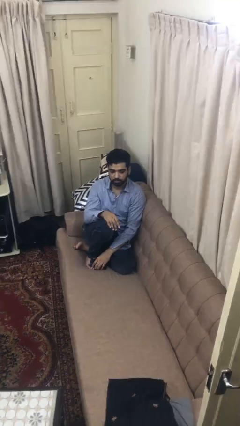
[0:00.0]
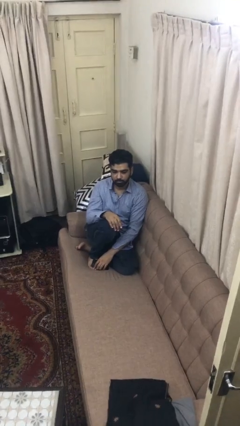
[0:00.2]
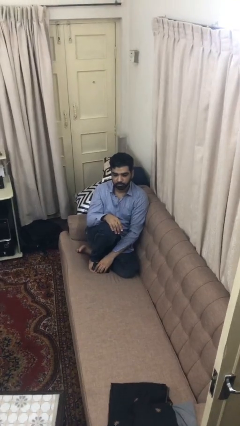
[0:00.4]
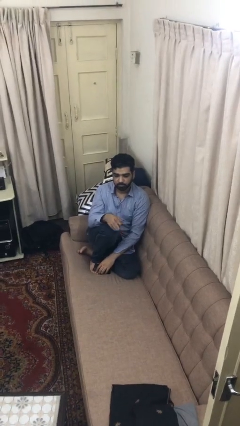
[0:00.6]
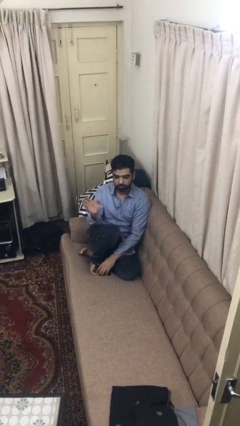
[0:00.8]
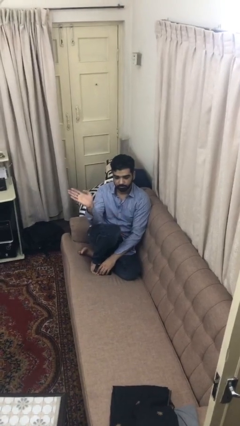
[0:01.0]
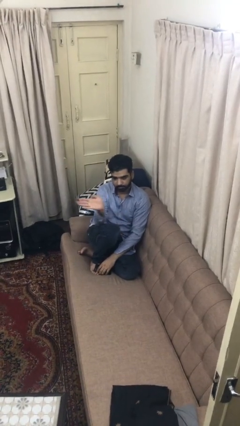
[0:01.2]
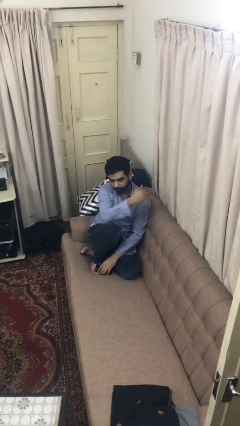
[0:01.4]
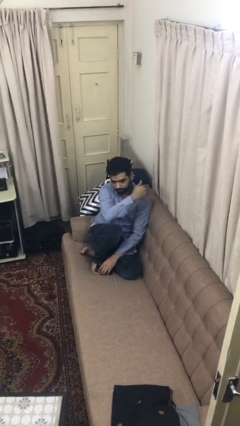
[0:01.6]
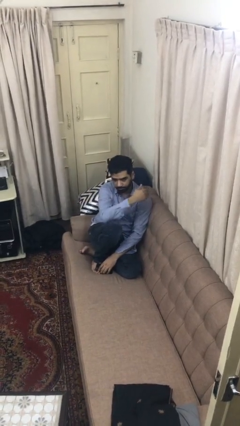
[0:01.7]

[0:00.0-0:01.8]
person gestures swipe left

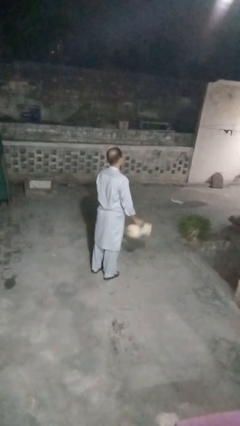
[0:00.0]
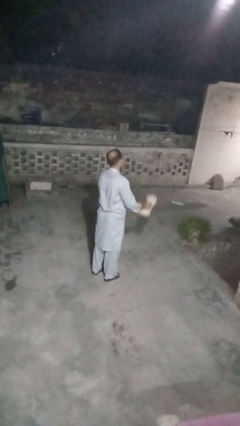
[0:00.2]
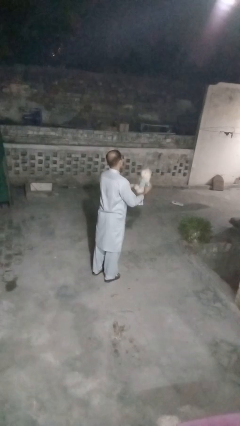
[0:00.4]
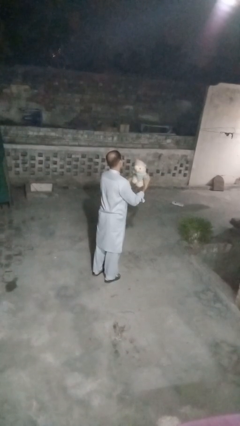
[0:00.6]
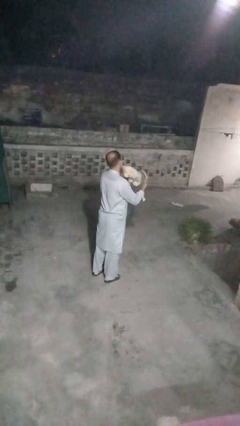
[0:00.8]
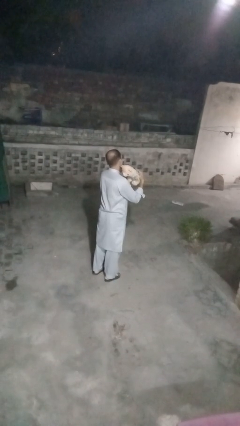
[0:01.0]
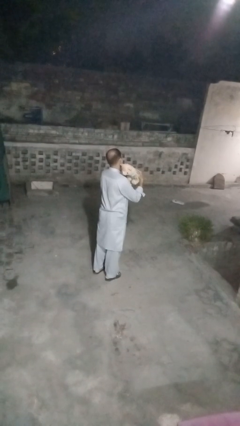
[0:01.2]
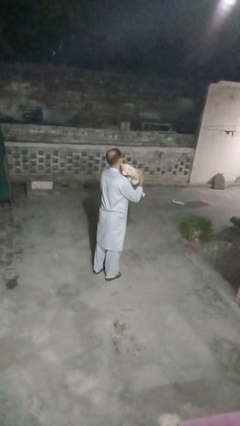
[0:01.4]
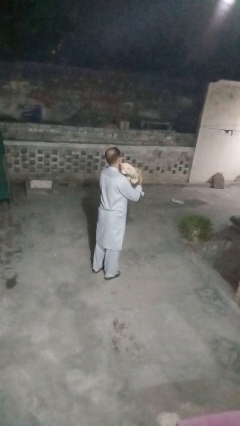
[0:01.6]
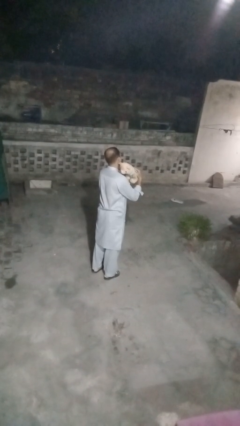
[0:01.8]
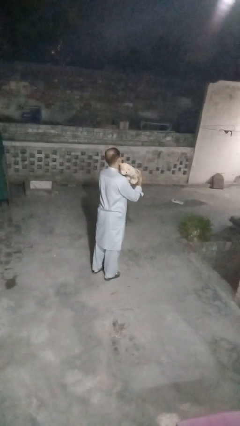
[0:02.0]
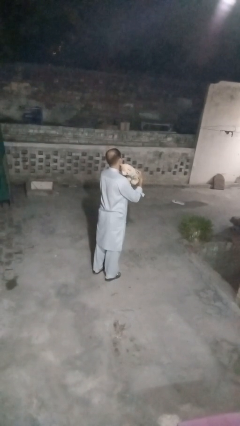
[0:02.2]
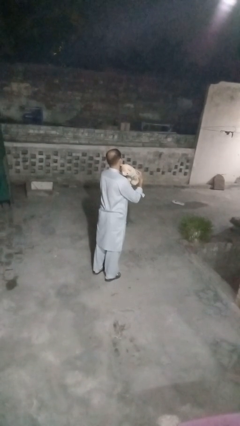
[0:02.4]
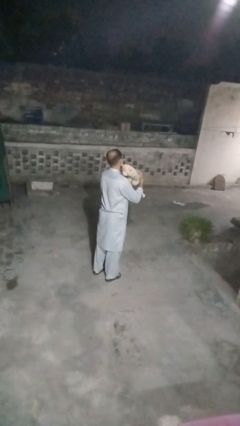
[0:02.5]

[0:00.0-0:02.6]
person hugs stuffed animal

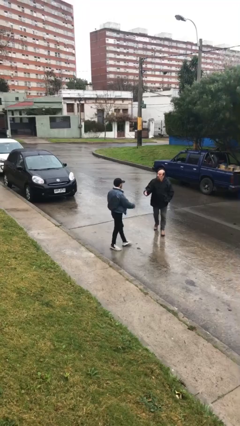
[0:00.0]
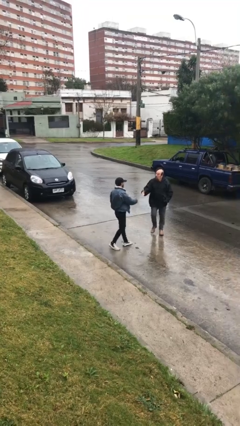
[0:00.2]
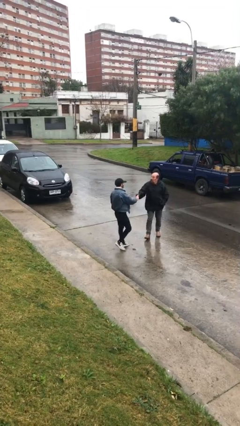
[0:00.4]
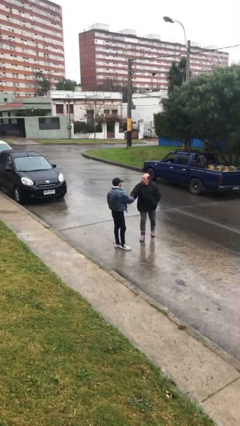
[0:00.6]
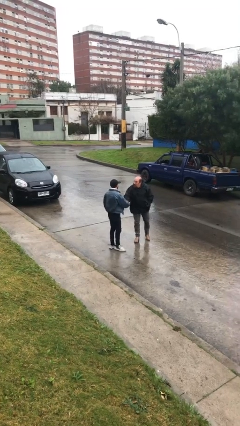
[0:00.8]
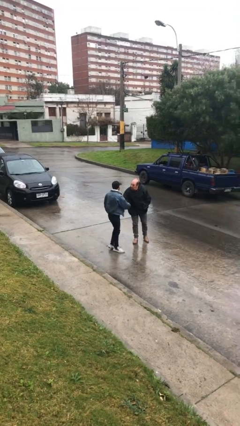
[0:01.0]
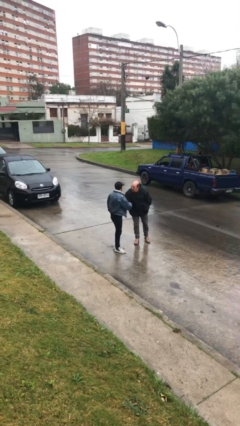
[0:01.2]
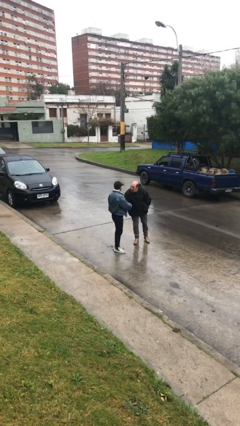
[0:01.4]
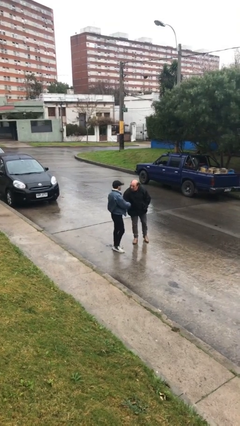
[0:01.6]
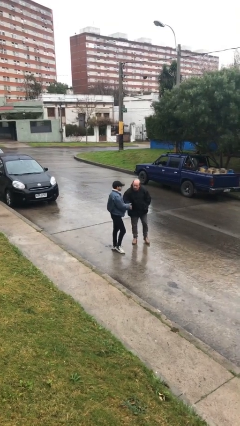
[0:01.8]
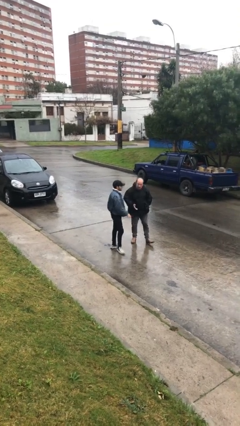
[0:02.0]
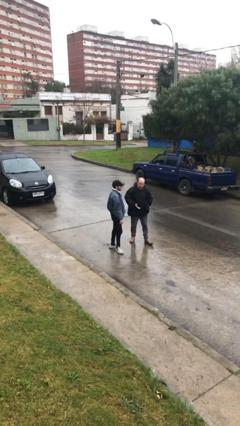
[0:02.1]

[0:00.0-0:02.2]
person shakes hand

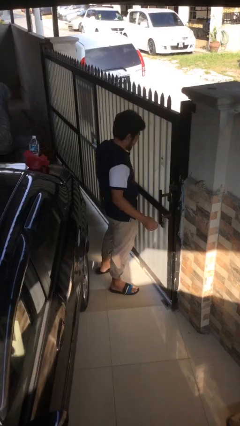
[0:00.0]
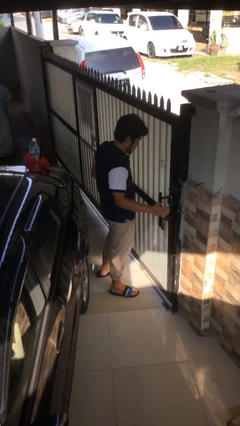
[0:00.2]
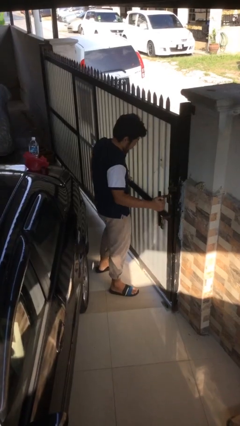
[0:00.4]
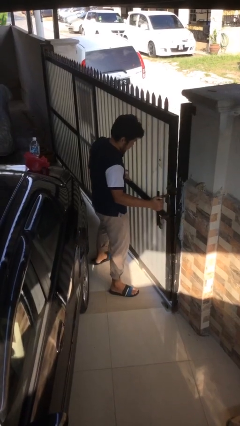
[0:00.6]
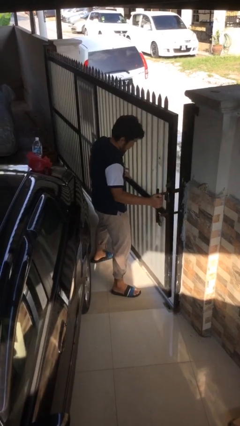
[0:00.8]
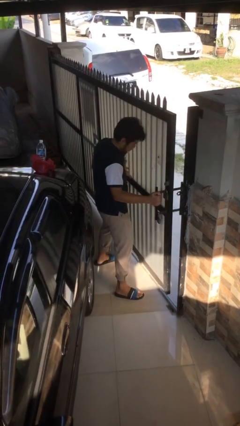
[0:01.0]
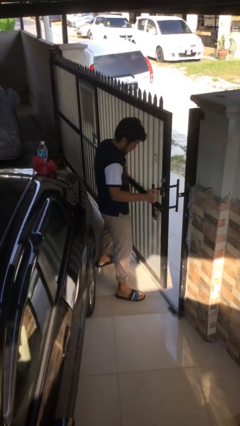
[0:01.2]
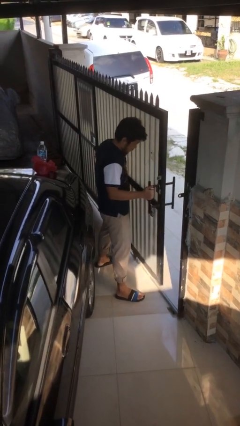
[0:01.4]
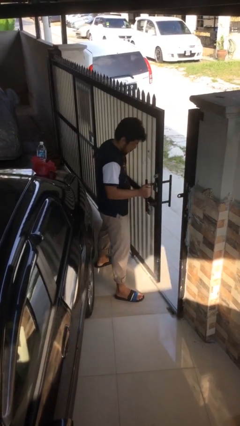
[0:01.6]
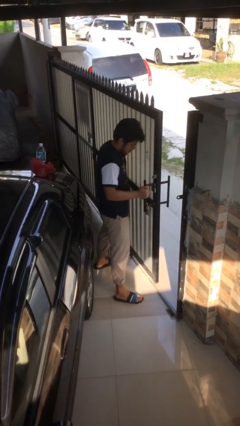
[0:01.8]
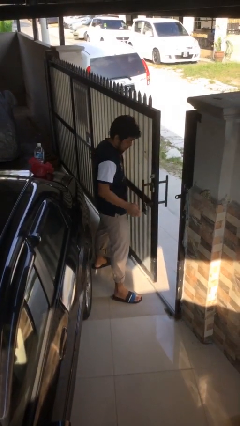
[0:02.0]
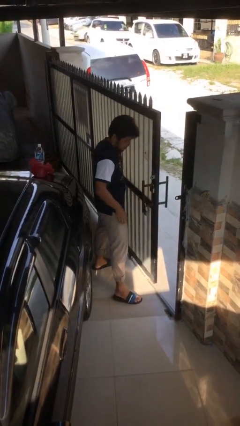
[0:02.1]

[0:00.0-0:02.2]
person opens sliding door

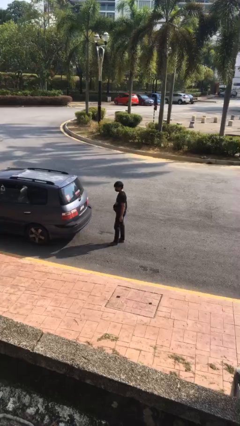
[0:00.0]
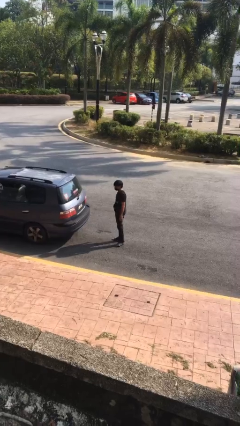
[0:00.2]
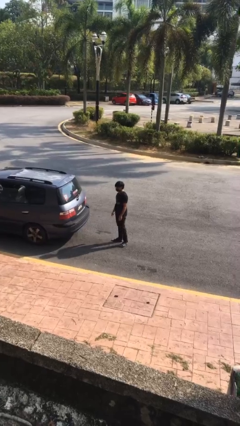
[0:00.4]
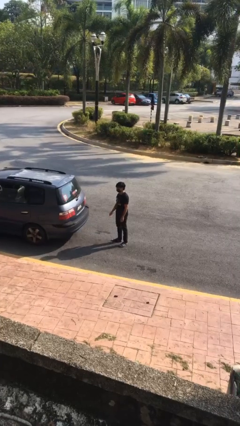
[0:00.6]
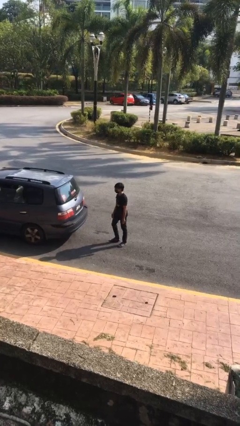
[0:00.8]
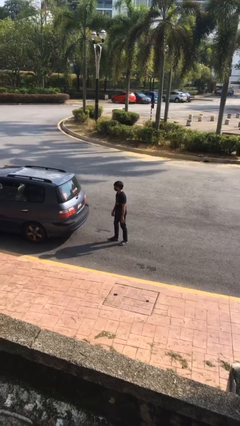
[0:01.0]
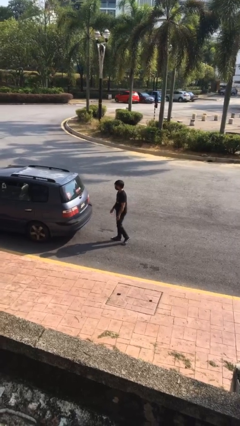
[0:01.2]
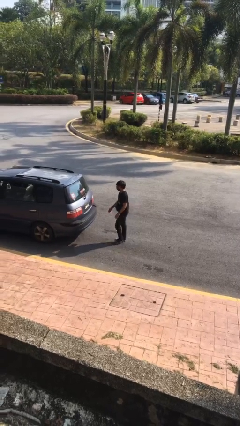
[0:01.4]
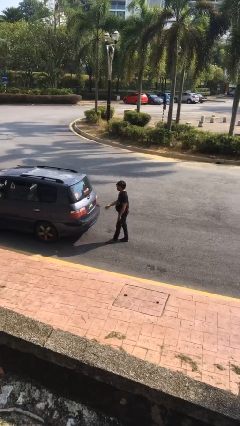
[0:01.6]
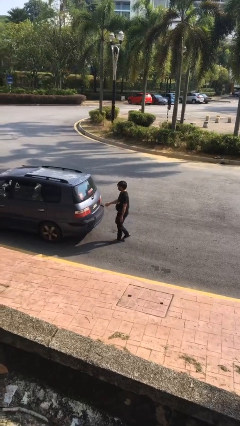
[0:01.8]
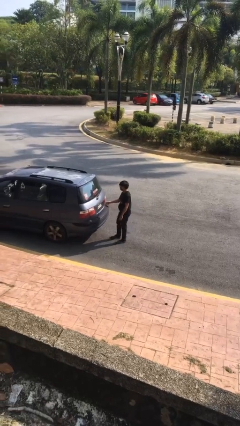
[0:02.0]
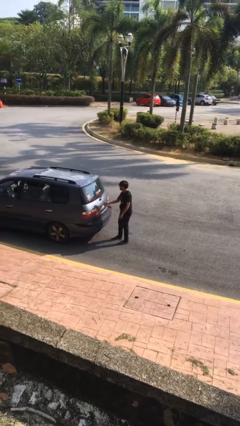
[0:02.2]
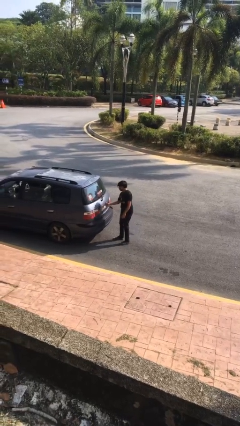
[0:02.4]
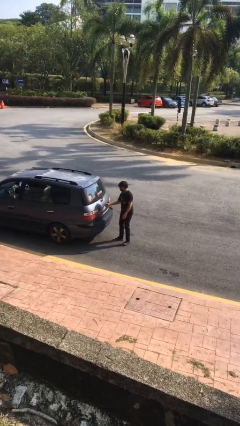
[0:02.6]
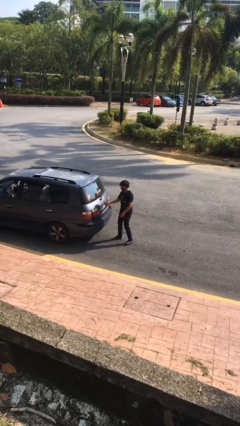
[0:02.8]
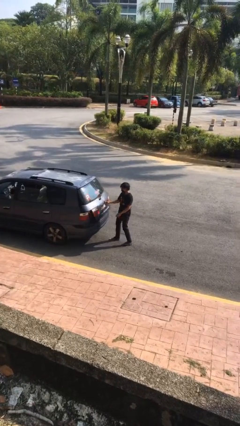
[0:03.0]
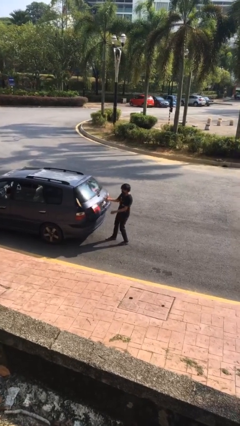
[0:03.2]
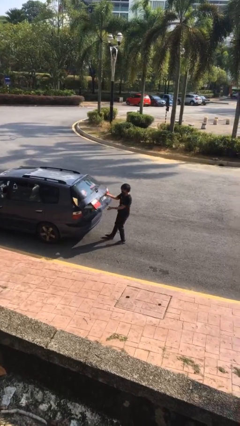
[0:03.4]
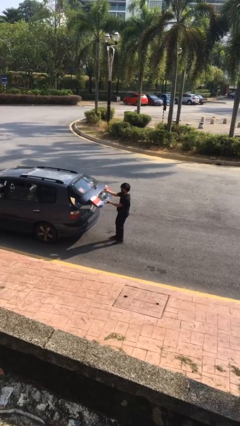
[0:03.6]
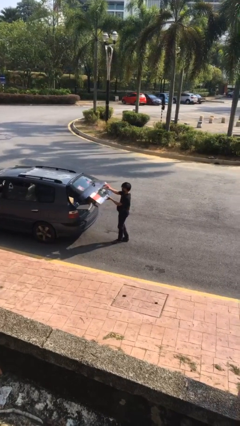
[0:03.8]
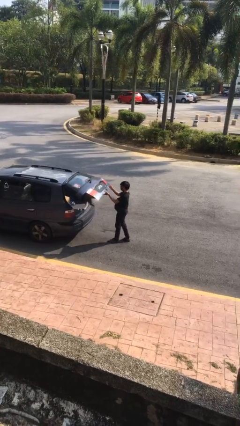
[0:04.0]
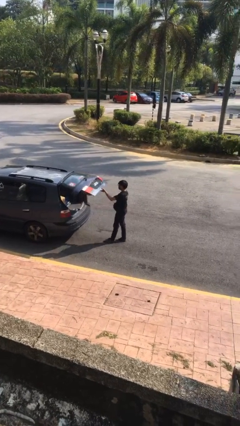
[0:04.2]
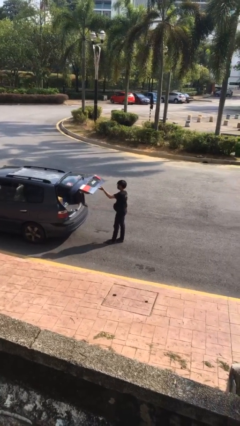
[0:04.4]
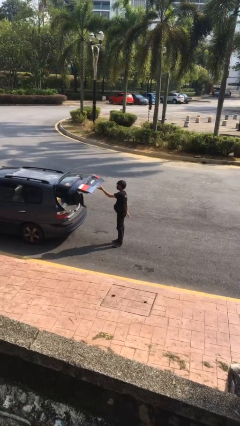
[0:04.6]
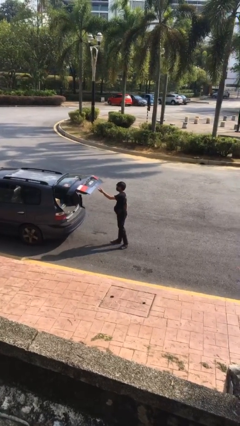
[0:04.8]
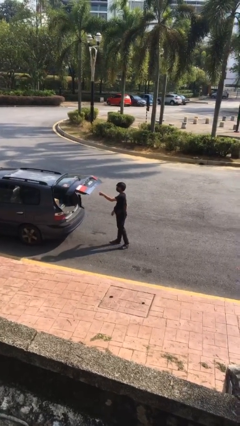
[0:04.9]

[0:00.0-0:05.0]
person opens car trunk

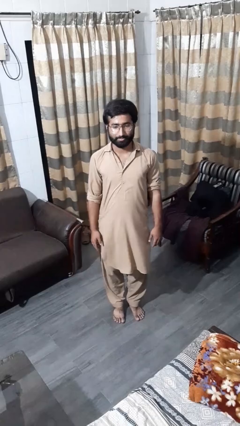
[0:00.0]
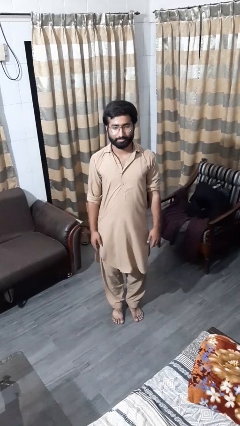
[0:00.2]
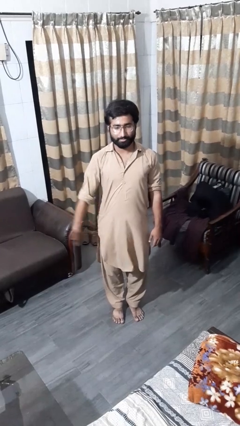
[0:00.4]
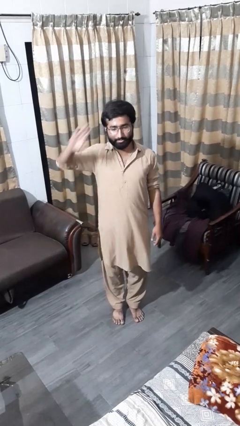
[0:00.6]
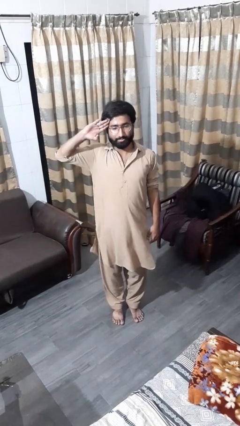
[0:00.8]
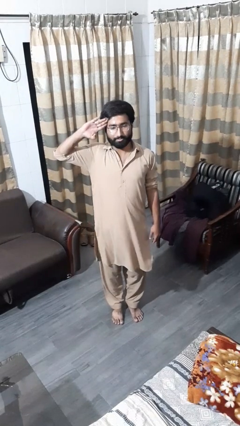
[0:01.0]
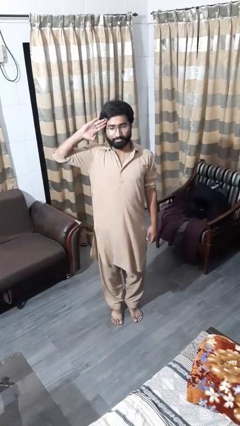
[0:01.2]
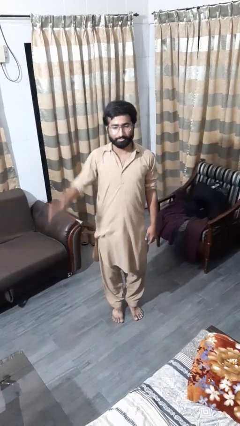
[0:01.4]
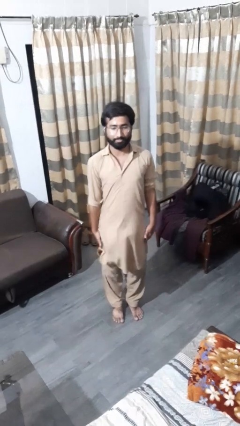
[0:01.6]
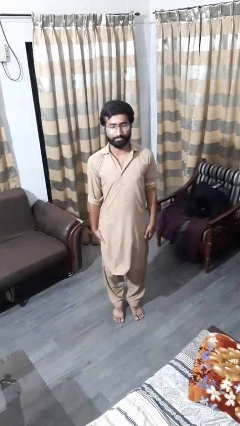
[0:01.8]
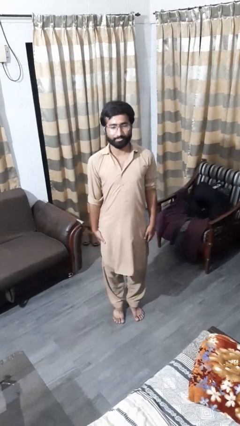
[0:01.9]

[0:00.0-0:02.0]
person salutes

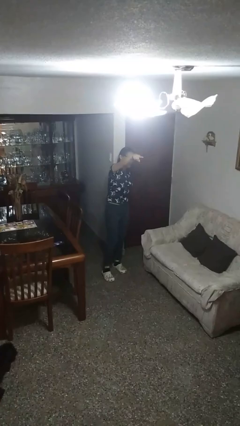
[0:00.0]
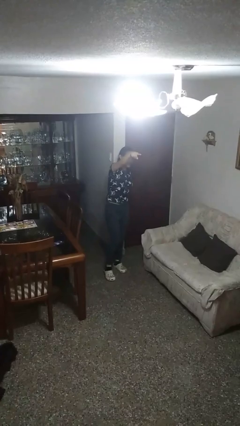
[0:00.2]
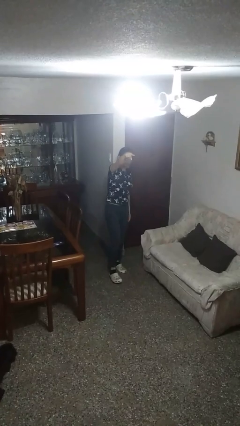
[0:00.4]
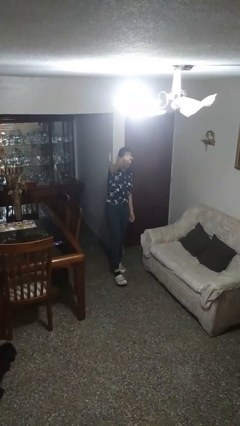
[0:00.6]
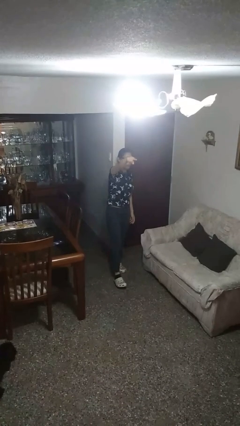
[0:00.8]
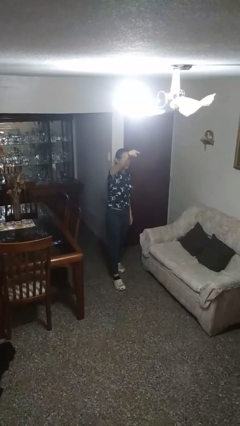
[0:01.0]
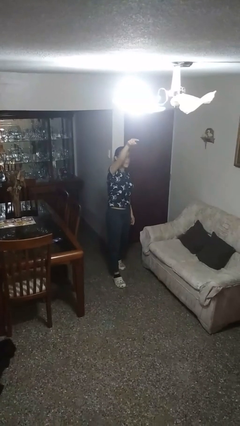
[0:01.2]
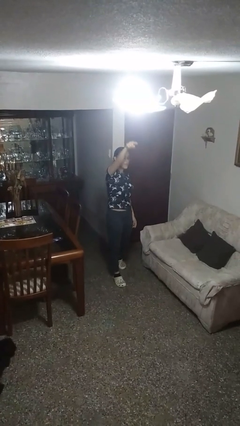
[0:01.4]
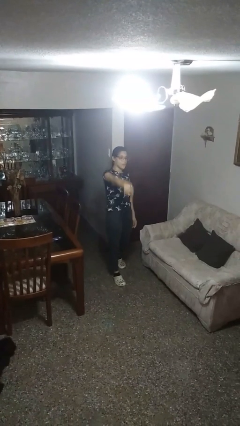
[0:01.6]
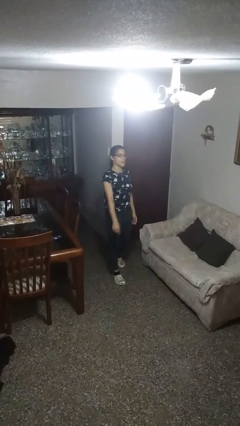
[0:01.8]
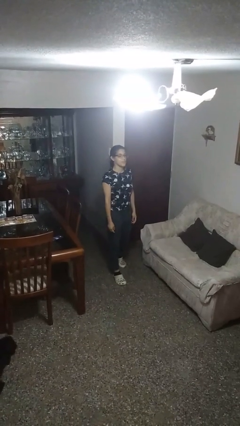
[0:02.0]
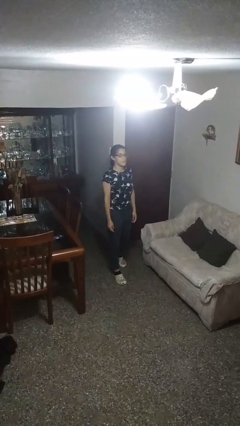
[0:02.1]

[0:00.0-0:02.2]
person points at person
